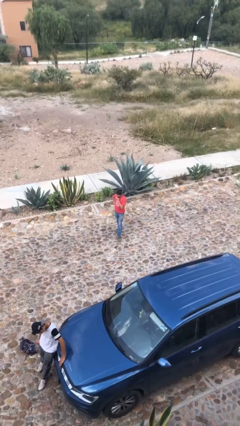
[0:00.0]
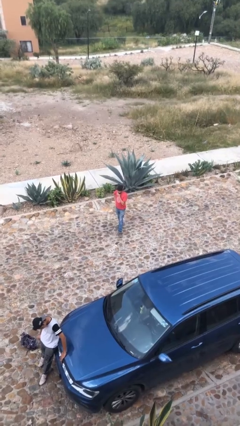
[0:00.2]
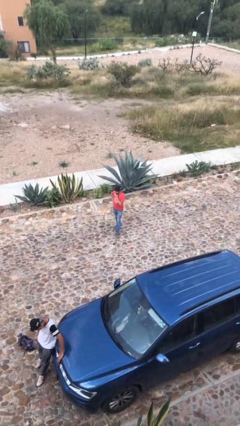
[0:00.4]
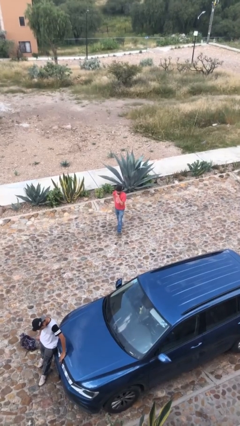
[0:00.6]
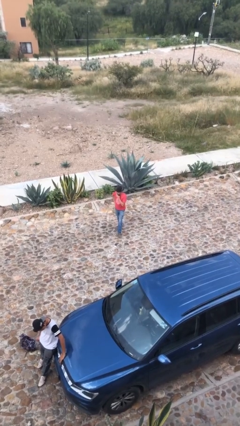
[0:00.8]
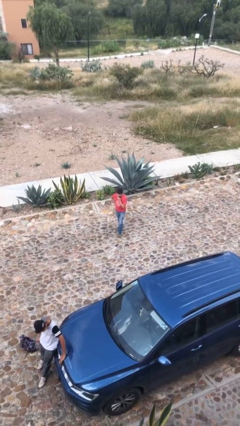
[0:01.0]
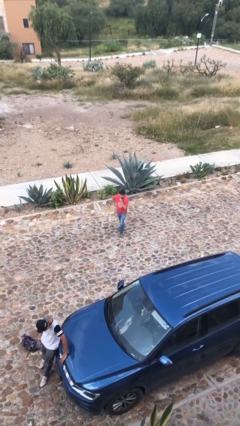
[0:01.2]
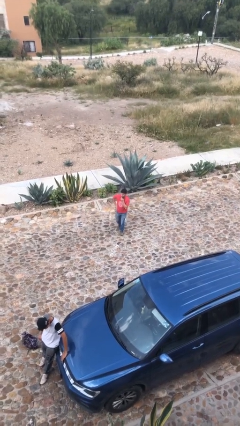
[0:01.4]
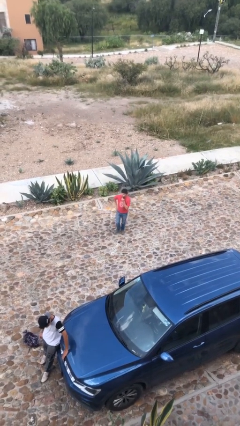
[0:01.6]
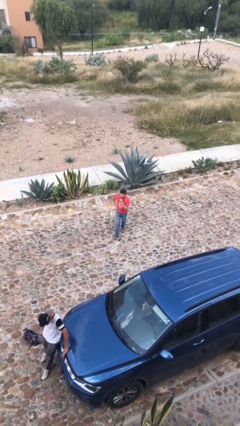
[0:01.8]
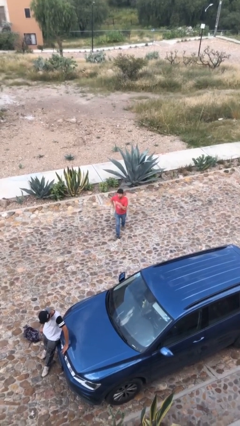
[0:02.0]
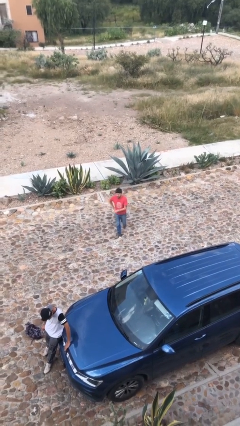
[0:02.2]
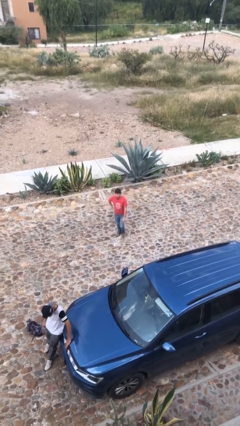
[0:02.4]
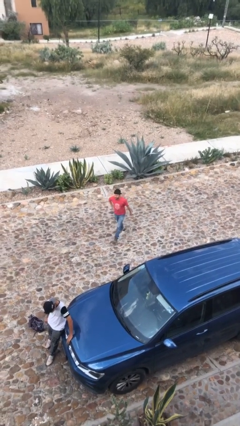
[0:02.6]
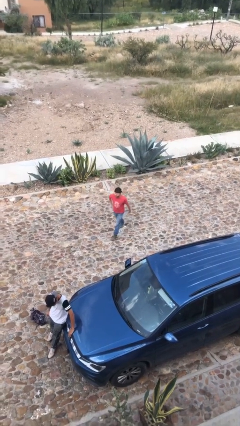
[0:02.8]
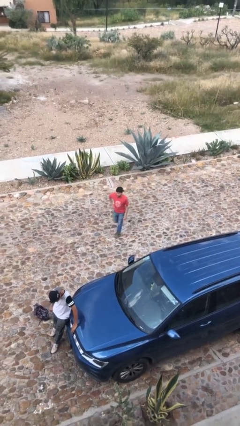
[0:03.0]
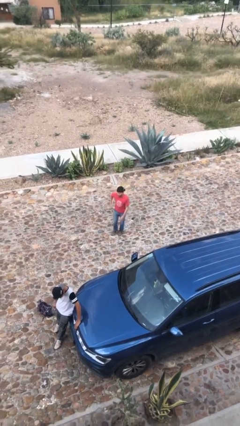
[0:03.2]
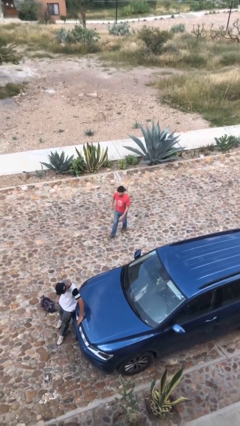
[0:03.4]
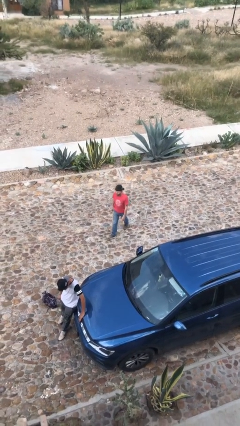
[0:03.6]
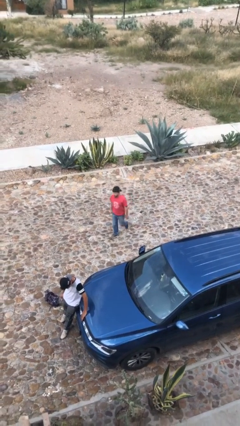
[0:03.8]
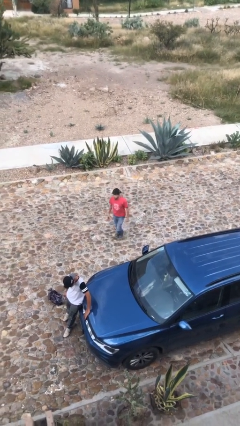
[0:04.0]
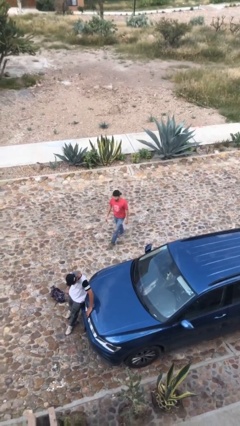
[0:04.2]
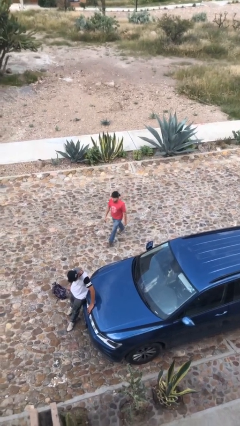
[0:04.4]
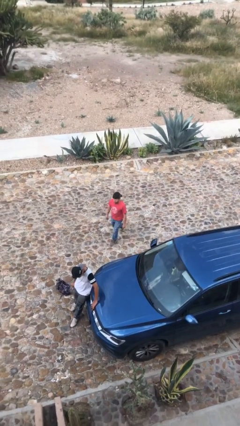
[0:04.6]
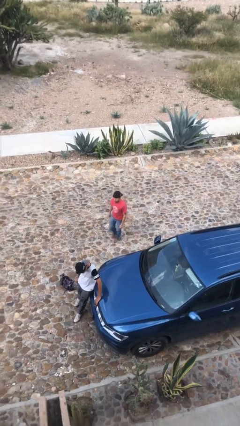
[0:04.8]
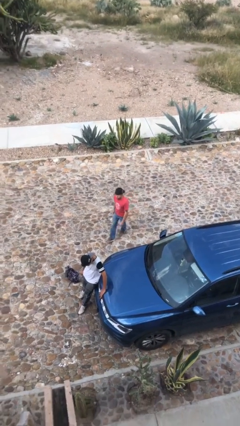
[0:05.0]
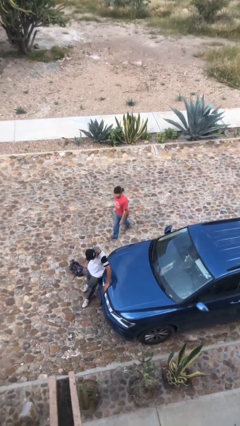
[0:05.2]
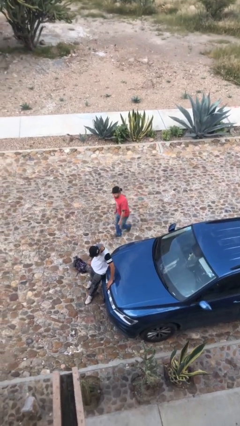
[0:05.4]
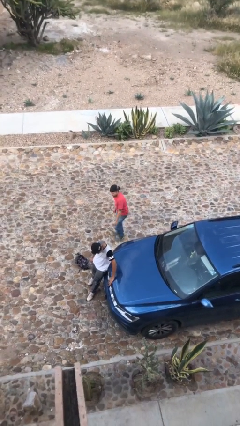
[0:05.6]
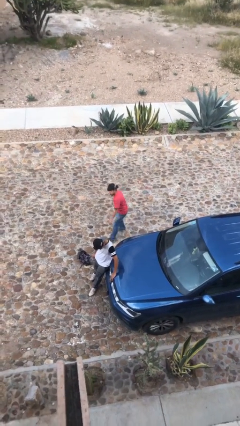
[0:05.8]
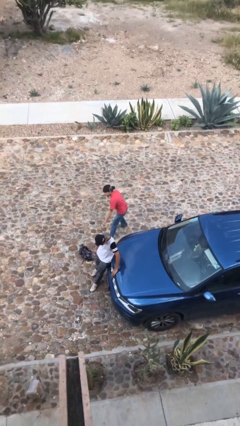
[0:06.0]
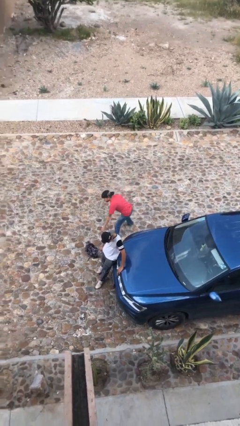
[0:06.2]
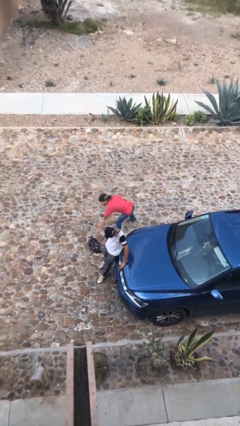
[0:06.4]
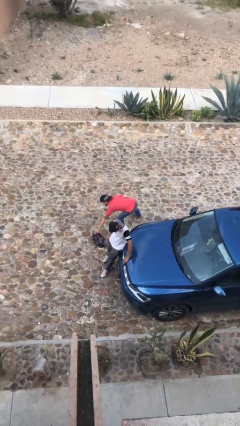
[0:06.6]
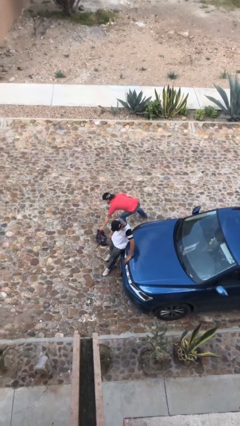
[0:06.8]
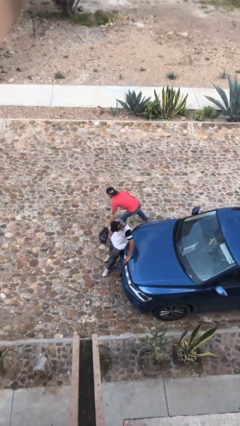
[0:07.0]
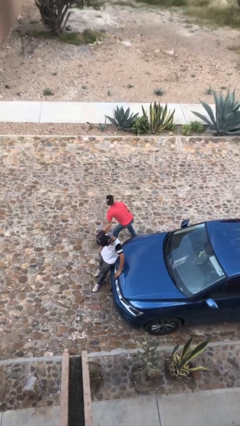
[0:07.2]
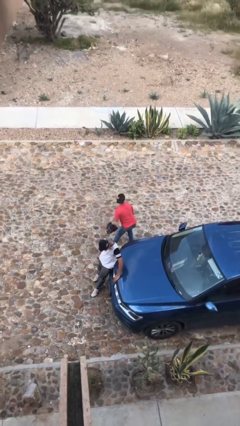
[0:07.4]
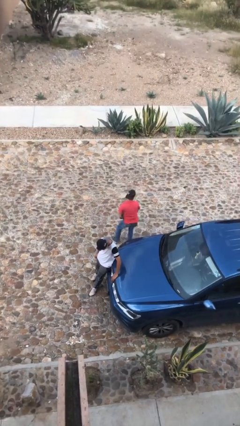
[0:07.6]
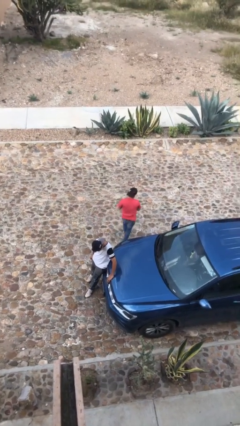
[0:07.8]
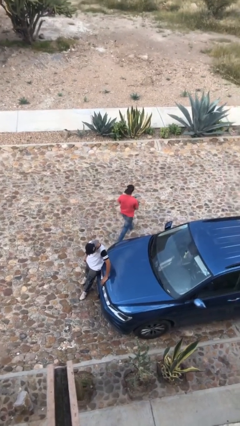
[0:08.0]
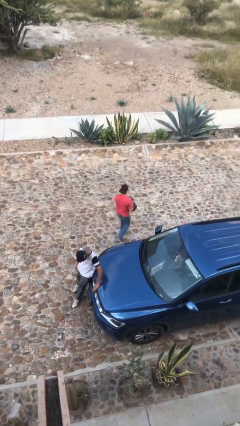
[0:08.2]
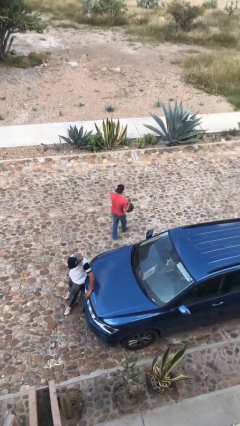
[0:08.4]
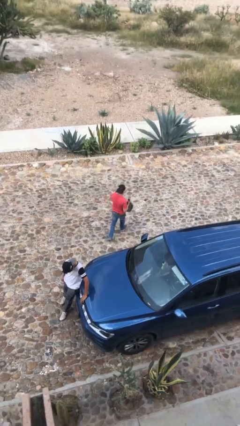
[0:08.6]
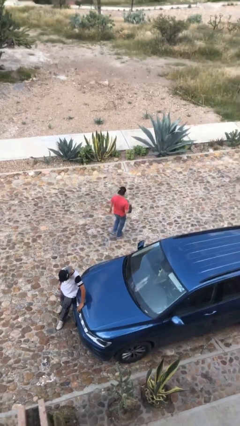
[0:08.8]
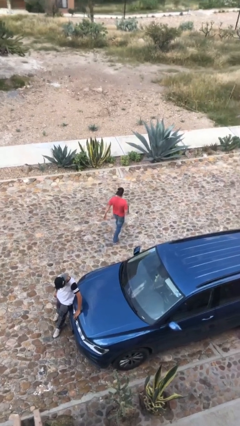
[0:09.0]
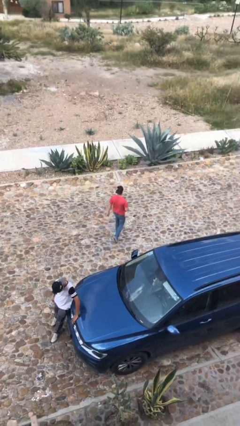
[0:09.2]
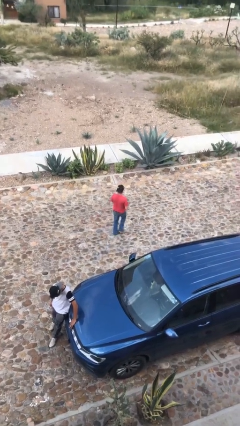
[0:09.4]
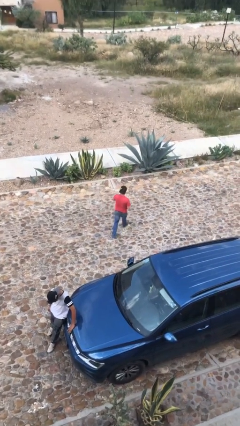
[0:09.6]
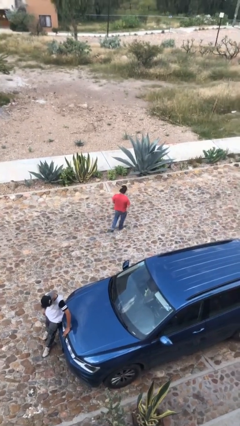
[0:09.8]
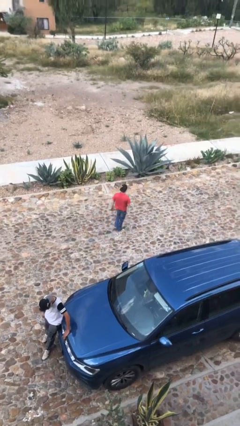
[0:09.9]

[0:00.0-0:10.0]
person steals object from person

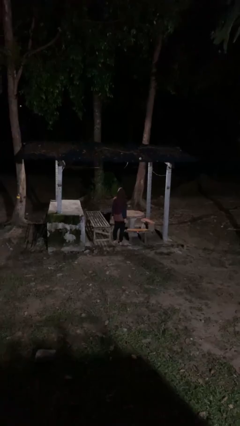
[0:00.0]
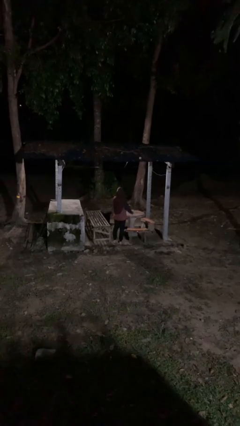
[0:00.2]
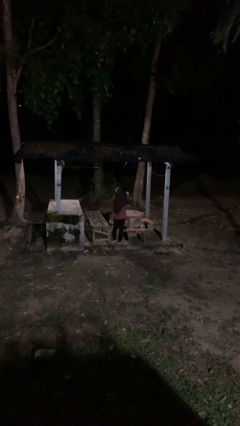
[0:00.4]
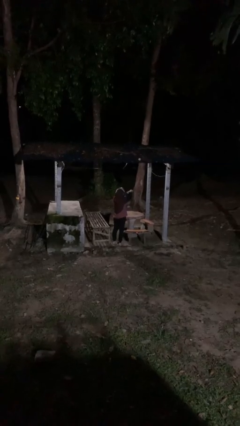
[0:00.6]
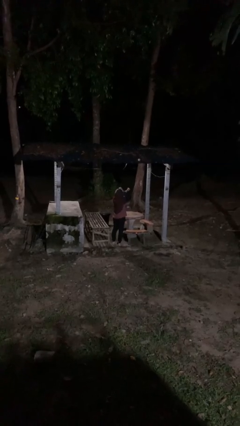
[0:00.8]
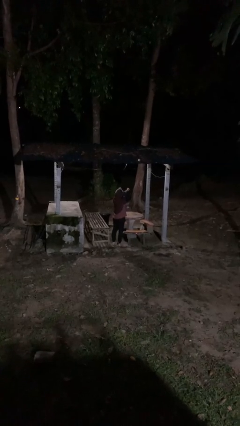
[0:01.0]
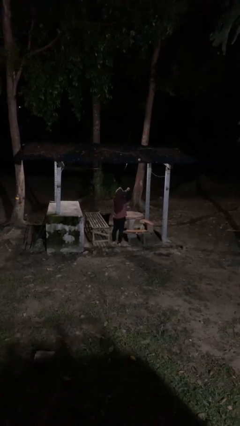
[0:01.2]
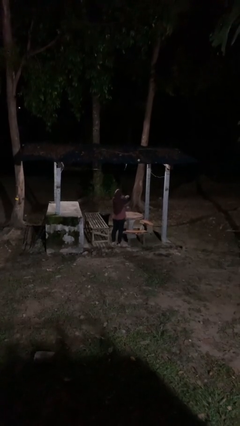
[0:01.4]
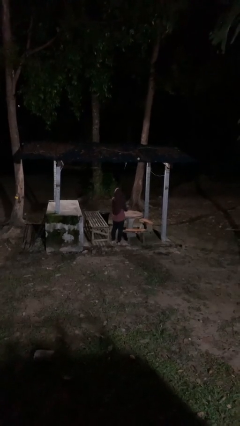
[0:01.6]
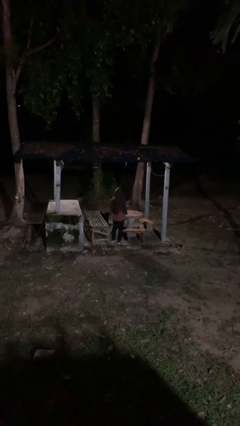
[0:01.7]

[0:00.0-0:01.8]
person gestures arms x

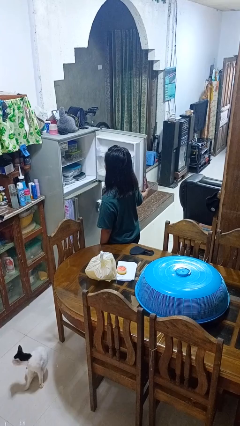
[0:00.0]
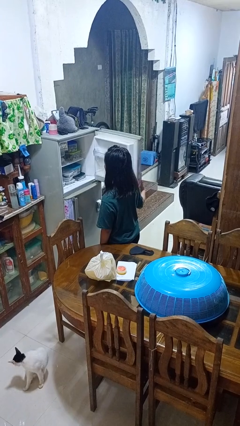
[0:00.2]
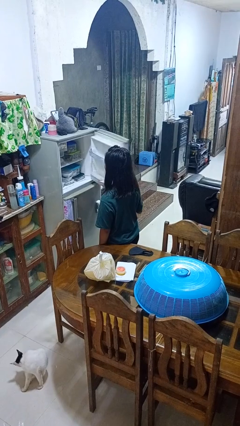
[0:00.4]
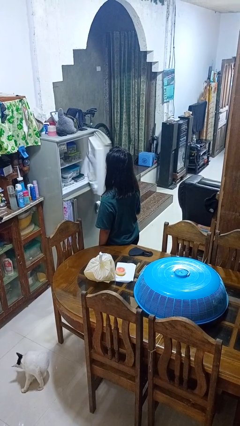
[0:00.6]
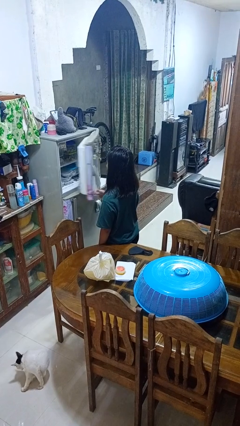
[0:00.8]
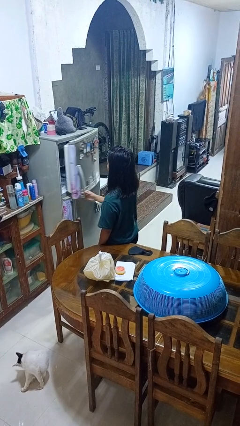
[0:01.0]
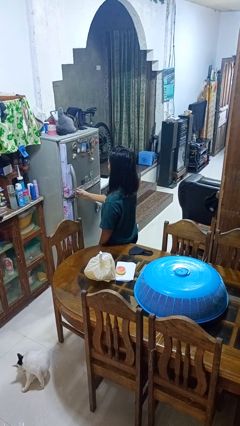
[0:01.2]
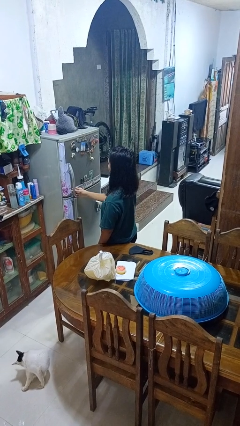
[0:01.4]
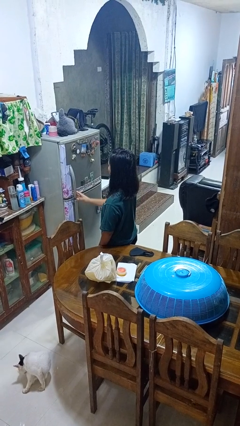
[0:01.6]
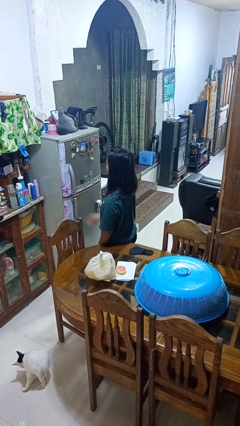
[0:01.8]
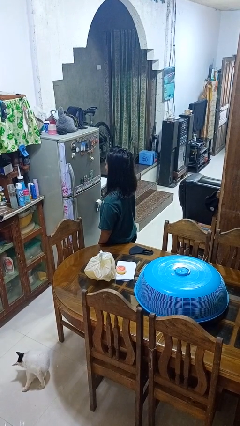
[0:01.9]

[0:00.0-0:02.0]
person closes refrigerator

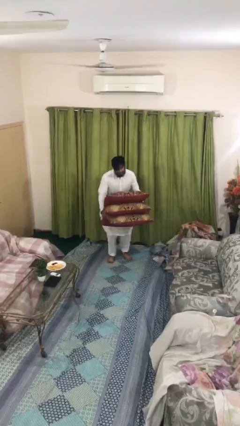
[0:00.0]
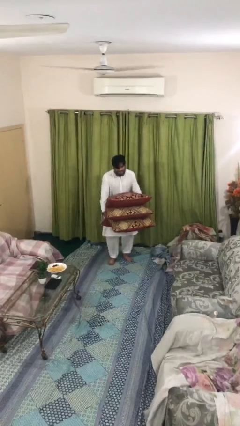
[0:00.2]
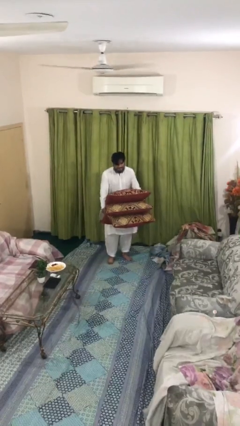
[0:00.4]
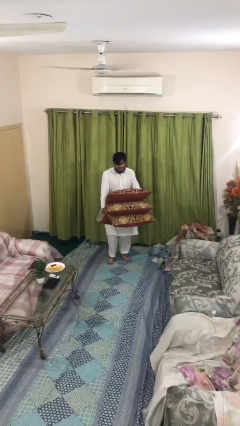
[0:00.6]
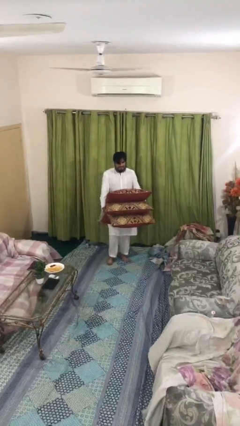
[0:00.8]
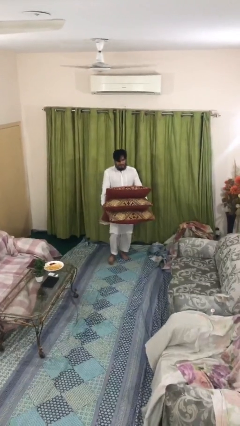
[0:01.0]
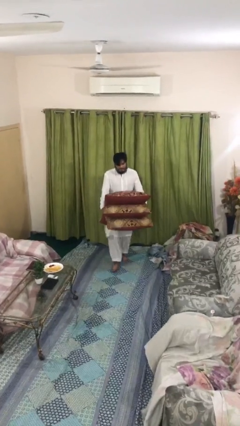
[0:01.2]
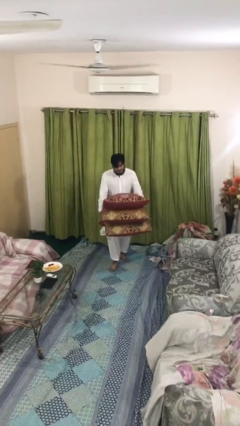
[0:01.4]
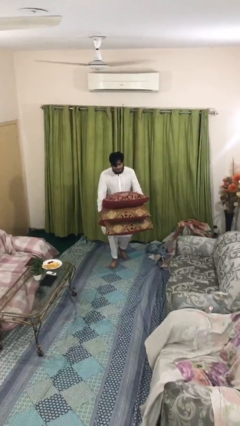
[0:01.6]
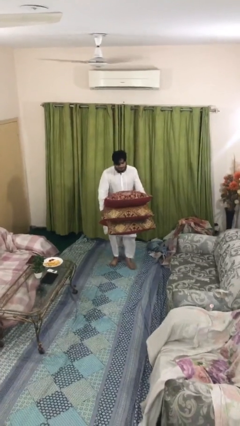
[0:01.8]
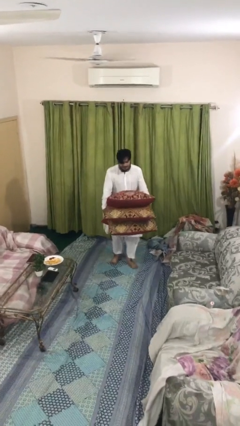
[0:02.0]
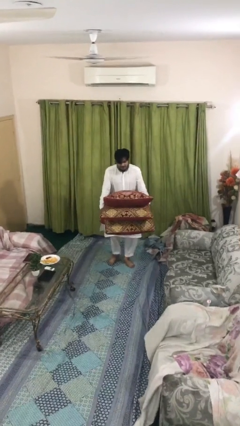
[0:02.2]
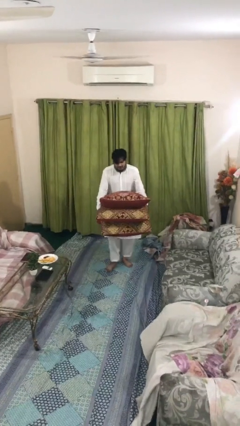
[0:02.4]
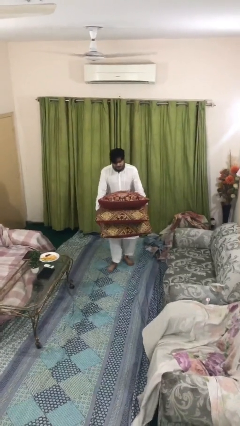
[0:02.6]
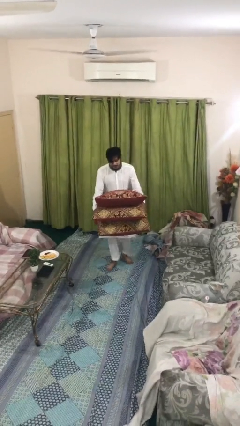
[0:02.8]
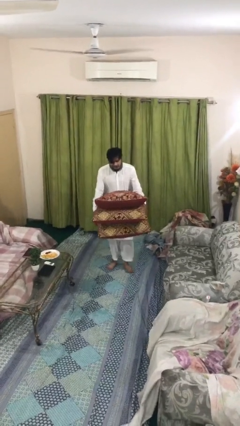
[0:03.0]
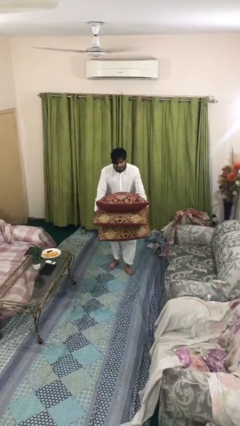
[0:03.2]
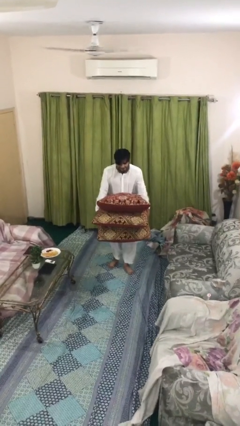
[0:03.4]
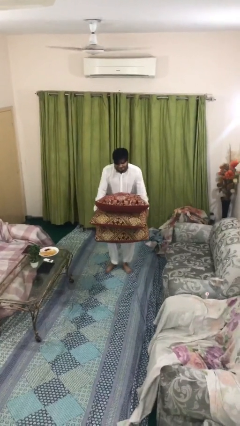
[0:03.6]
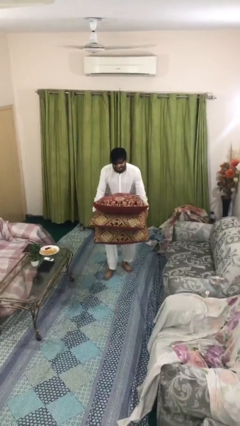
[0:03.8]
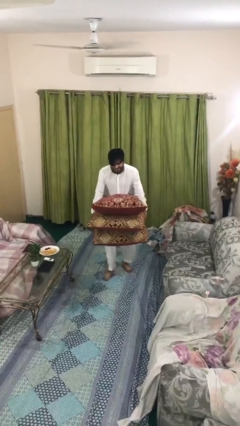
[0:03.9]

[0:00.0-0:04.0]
person carries heavy object
